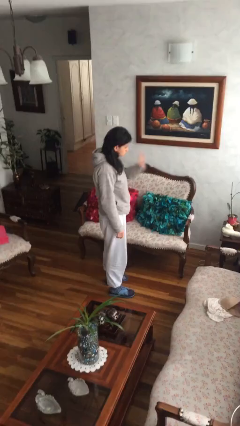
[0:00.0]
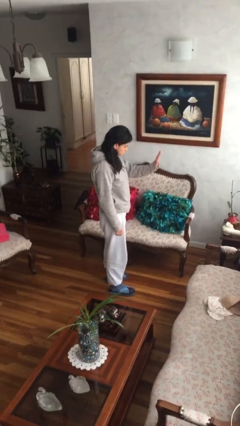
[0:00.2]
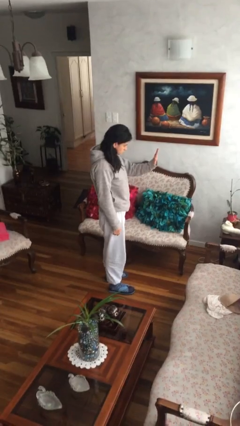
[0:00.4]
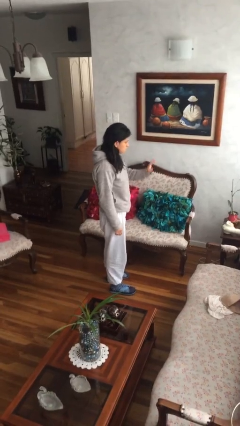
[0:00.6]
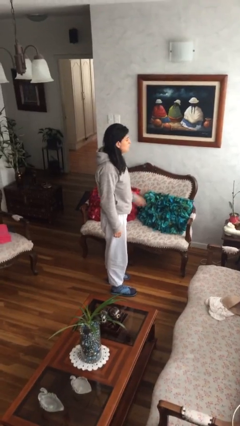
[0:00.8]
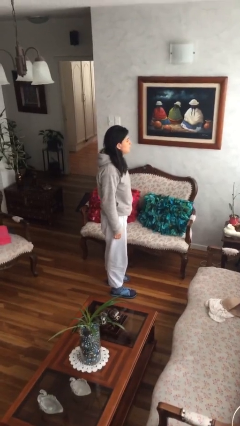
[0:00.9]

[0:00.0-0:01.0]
person gestures stop

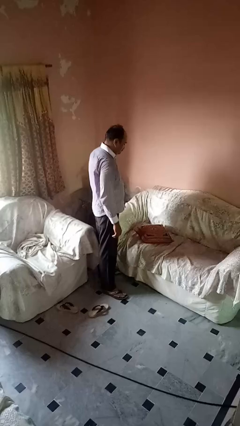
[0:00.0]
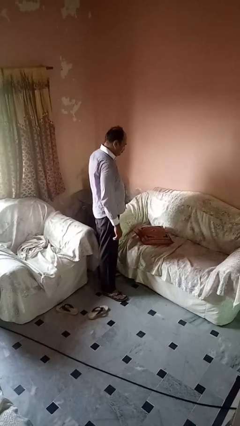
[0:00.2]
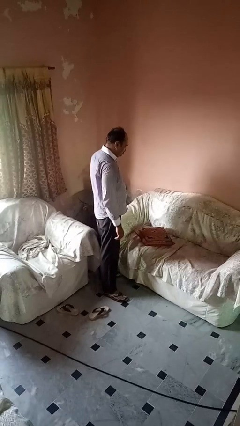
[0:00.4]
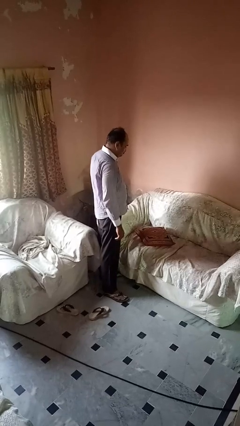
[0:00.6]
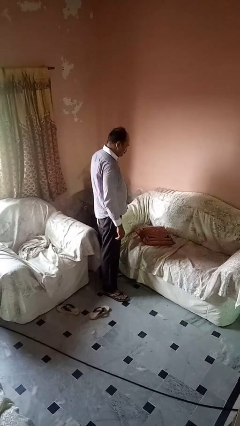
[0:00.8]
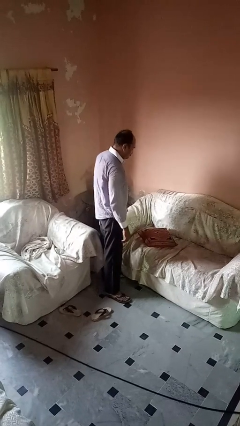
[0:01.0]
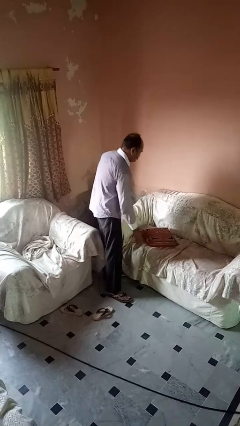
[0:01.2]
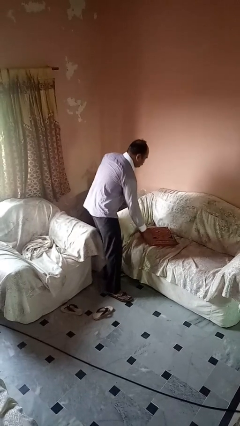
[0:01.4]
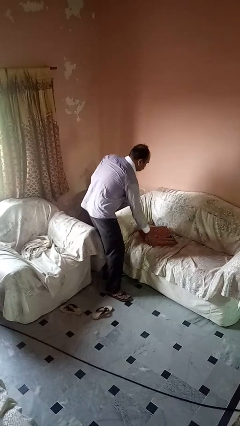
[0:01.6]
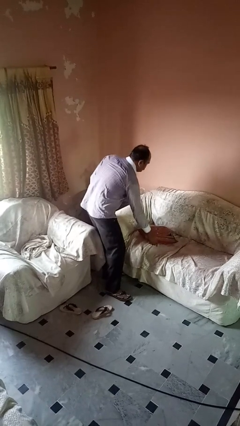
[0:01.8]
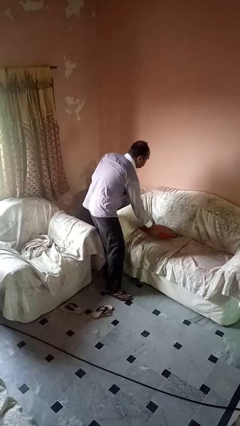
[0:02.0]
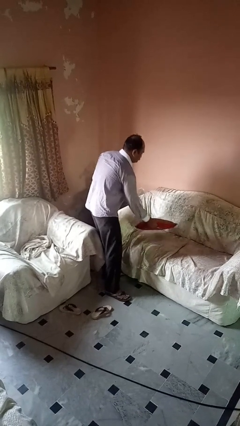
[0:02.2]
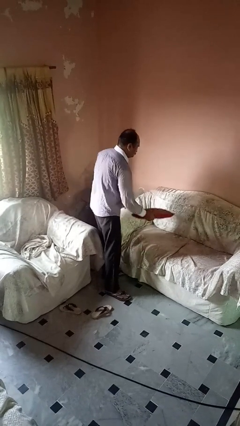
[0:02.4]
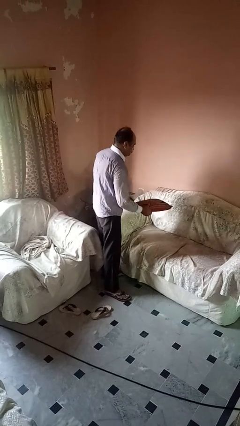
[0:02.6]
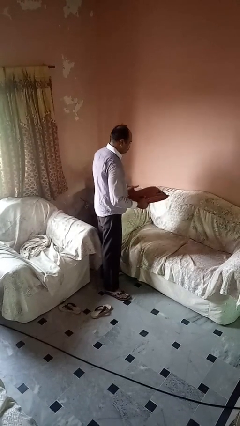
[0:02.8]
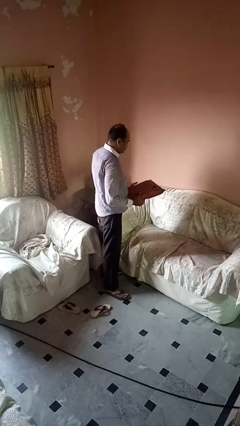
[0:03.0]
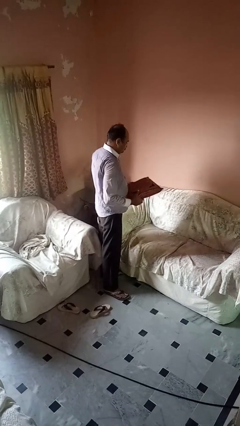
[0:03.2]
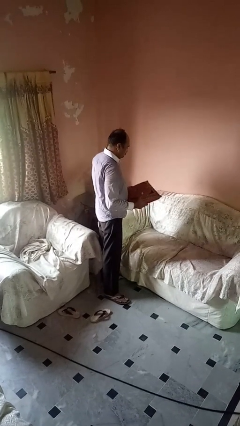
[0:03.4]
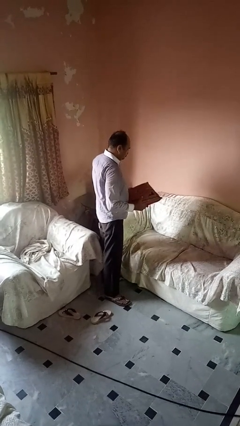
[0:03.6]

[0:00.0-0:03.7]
person picks up object from couch

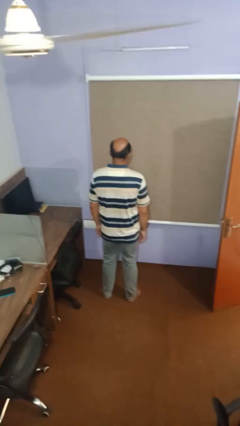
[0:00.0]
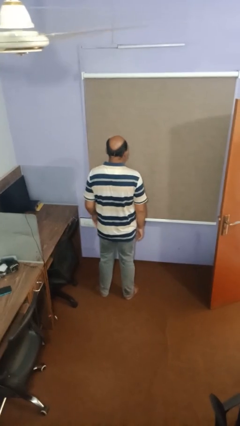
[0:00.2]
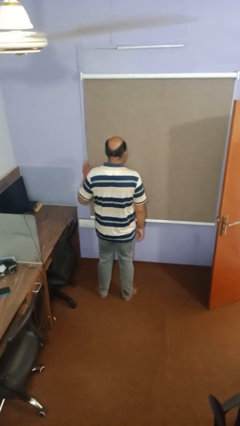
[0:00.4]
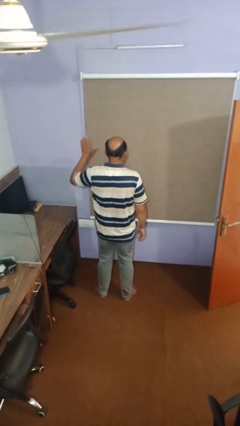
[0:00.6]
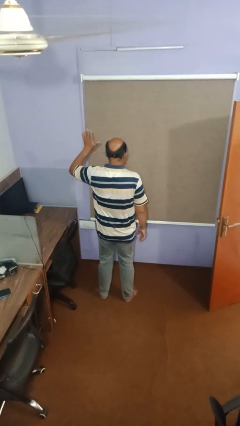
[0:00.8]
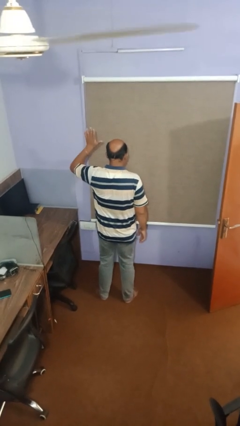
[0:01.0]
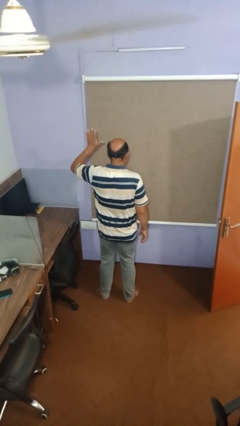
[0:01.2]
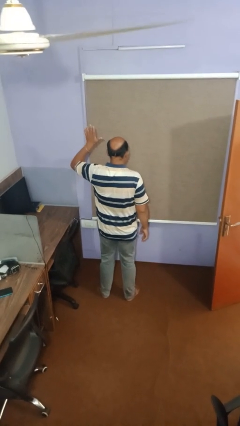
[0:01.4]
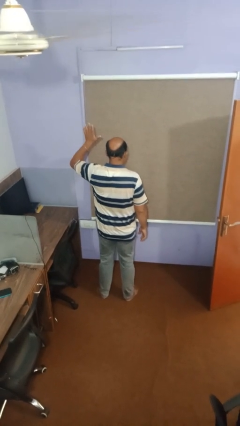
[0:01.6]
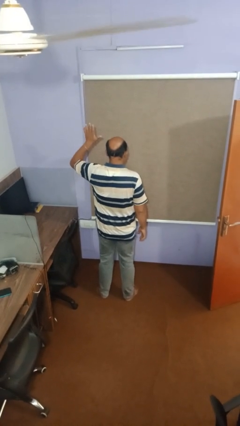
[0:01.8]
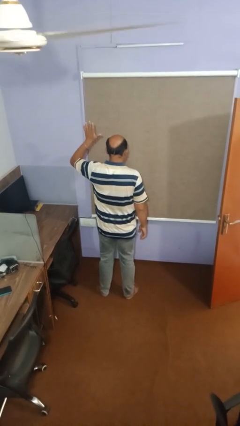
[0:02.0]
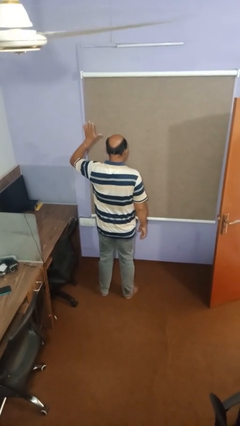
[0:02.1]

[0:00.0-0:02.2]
person gestures raise hand

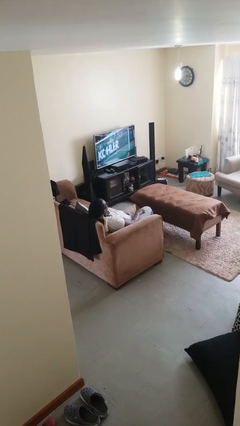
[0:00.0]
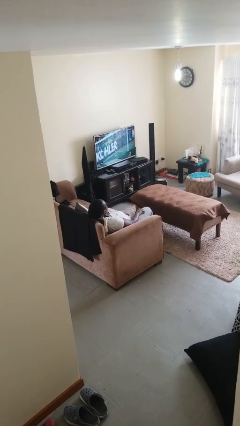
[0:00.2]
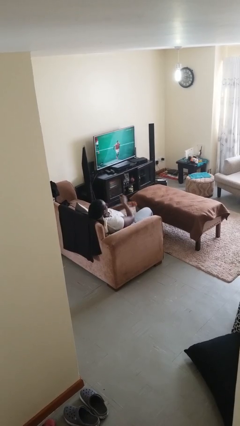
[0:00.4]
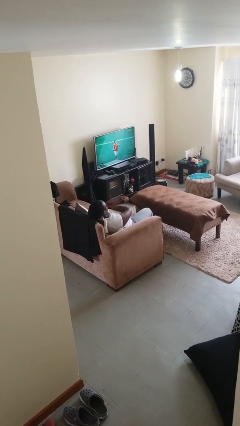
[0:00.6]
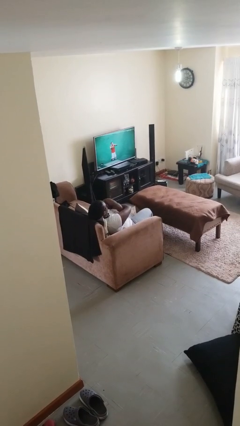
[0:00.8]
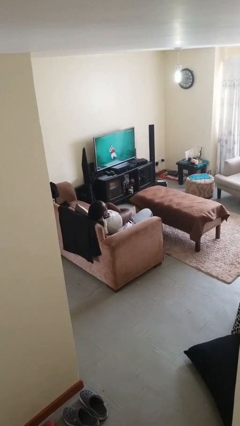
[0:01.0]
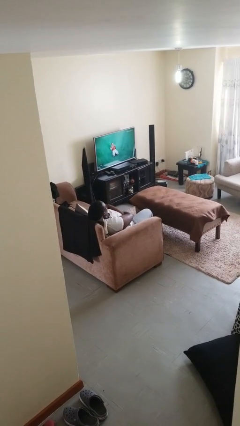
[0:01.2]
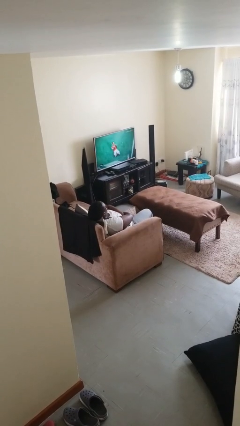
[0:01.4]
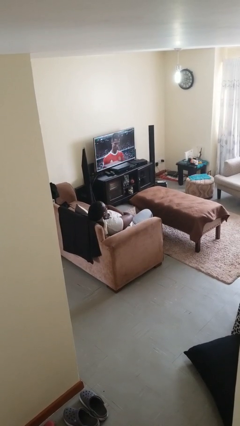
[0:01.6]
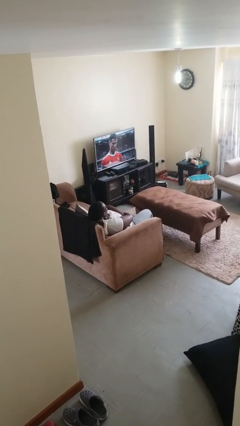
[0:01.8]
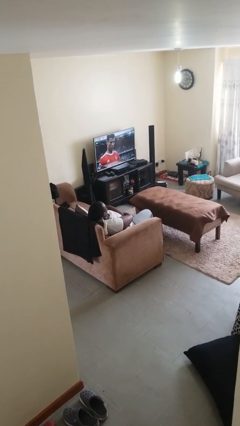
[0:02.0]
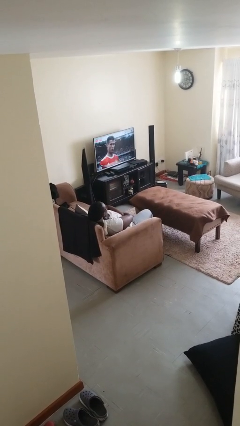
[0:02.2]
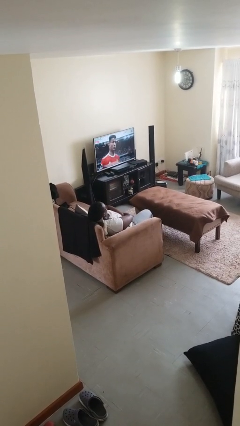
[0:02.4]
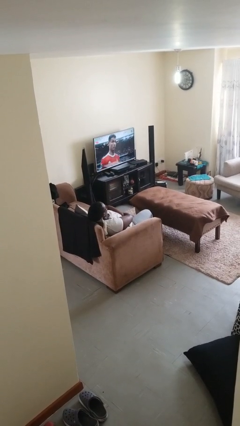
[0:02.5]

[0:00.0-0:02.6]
person crosses arms

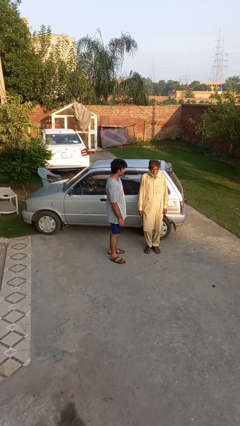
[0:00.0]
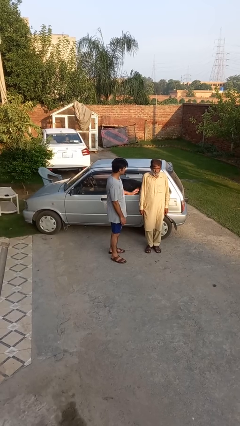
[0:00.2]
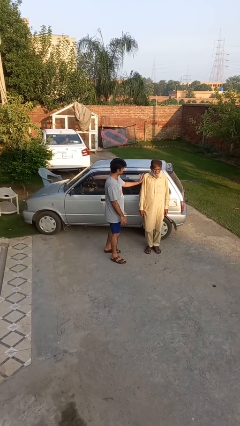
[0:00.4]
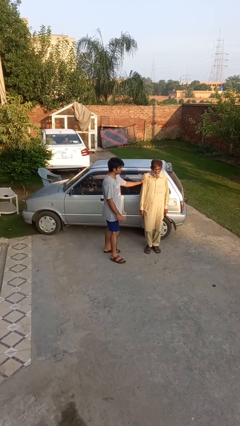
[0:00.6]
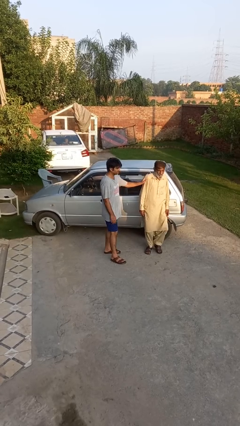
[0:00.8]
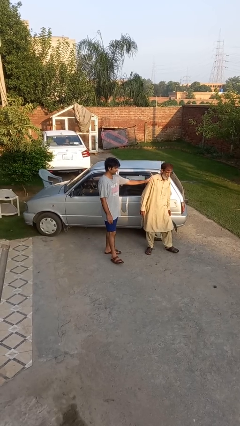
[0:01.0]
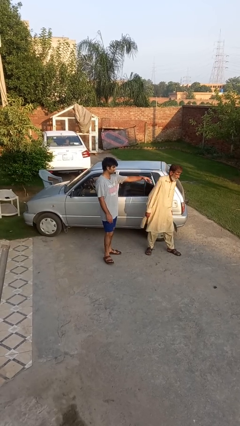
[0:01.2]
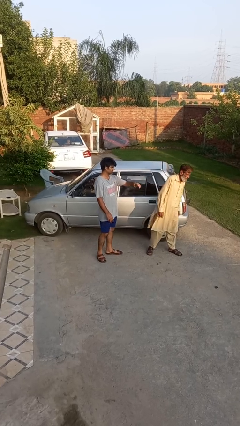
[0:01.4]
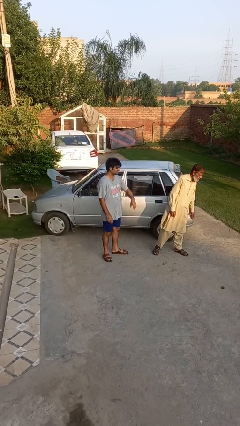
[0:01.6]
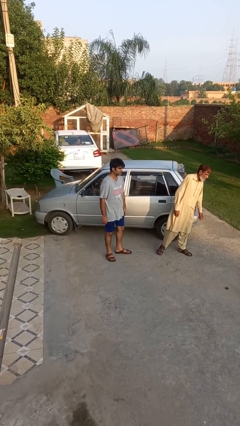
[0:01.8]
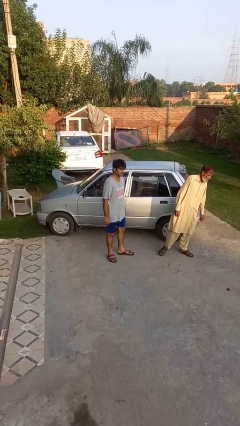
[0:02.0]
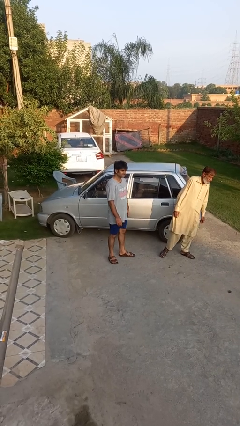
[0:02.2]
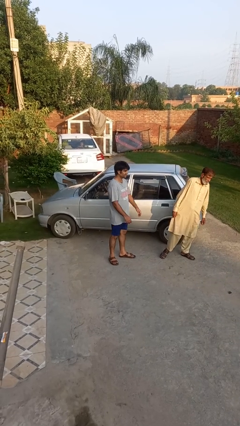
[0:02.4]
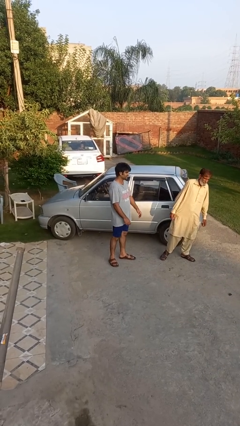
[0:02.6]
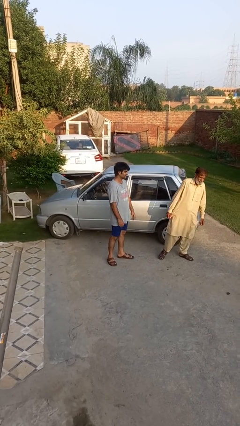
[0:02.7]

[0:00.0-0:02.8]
person shoves person

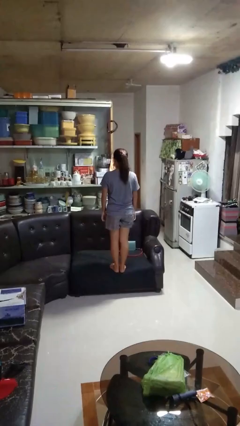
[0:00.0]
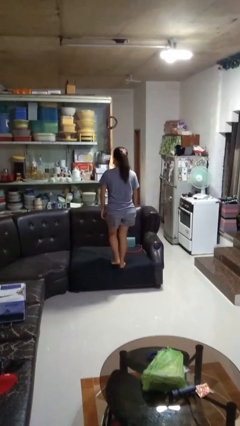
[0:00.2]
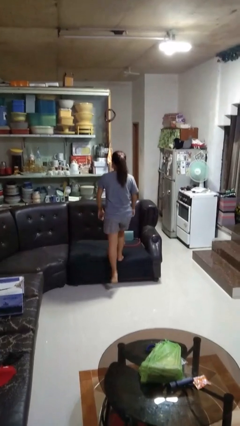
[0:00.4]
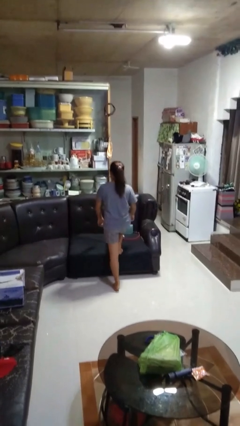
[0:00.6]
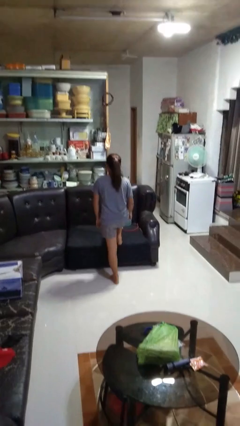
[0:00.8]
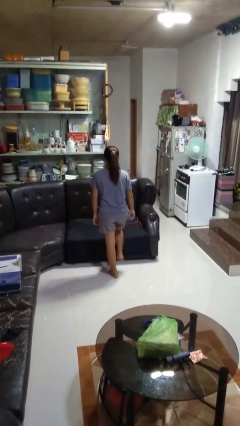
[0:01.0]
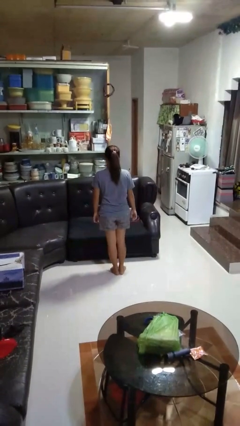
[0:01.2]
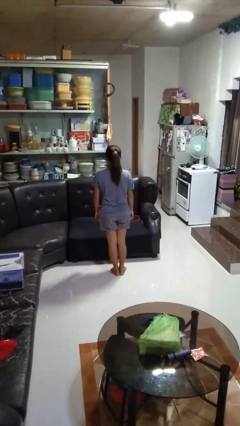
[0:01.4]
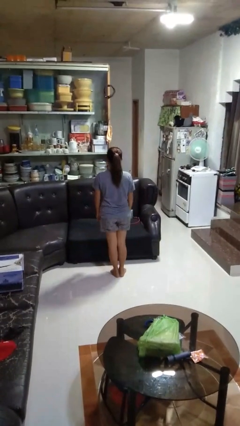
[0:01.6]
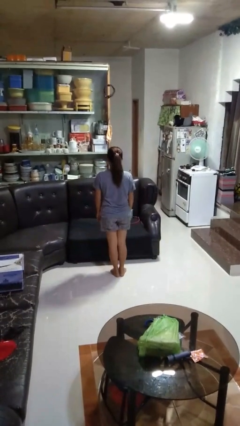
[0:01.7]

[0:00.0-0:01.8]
person climbs off couch

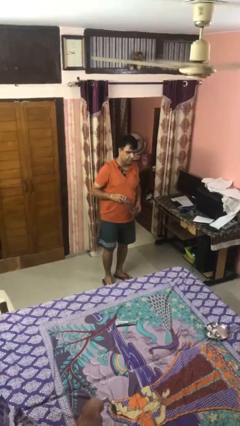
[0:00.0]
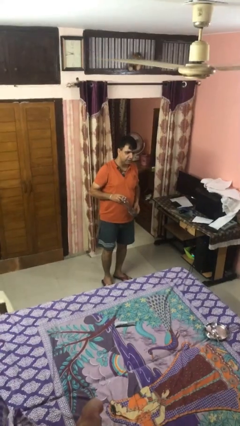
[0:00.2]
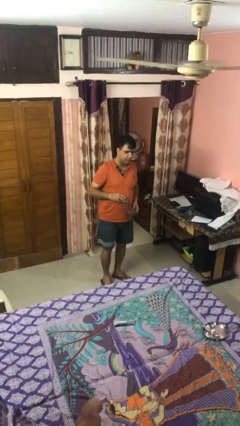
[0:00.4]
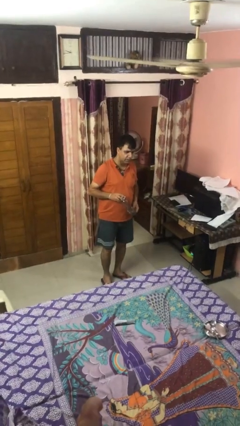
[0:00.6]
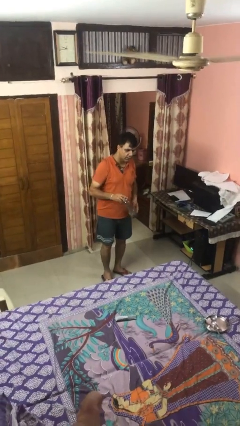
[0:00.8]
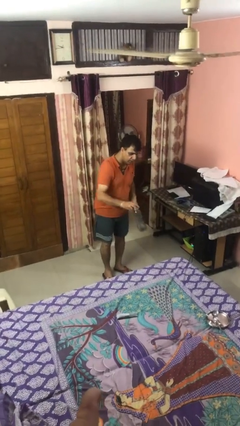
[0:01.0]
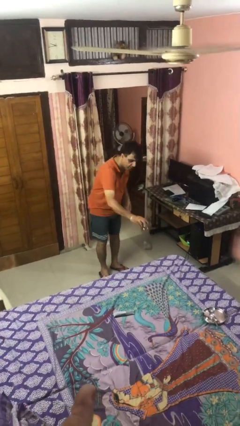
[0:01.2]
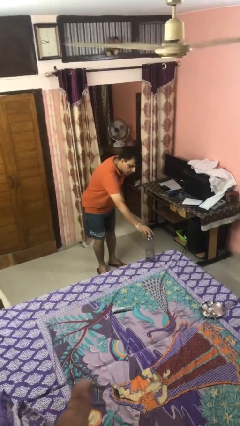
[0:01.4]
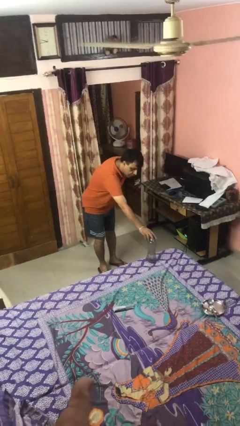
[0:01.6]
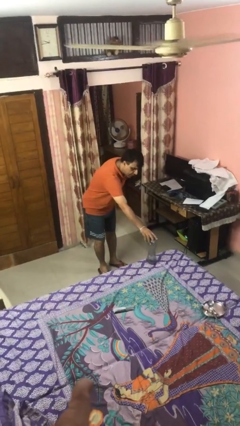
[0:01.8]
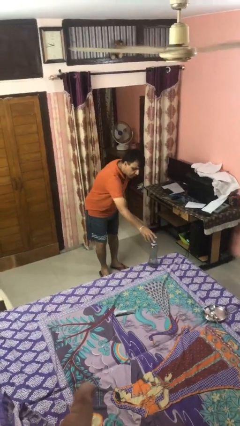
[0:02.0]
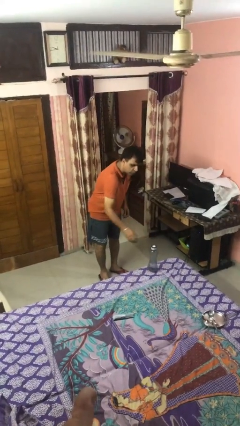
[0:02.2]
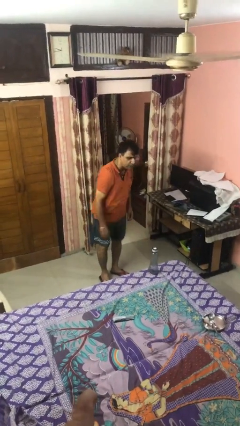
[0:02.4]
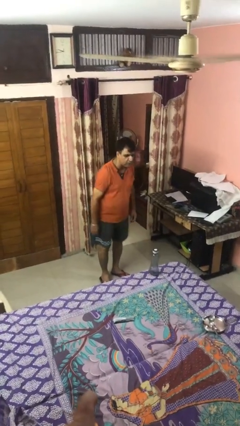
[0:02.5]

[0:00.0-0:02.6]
person puts down object on bed

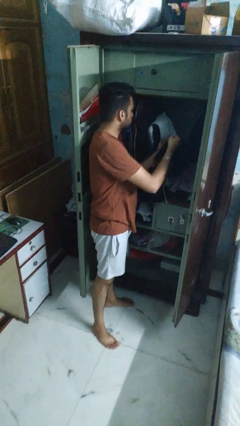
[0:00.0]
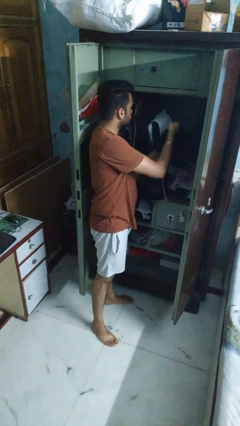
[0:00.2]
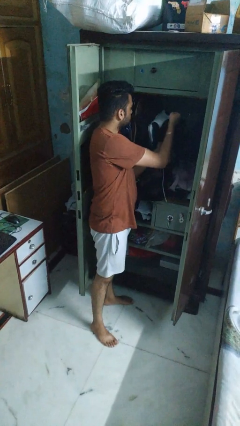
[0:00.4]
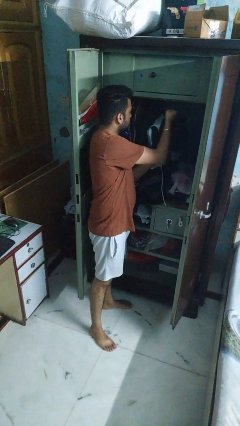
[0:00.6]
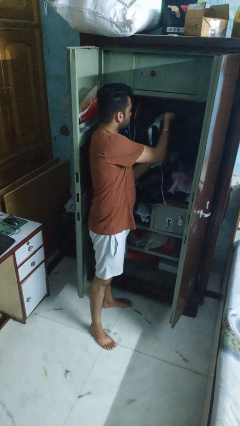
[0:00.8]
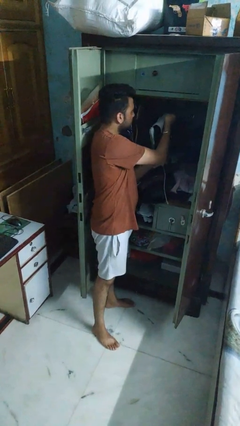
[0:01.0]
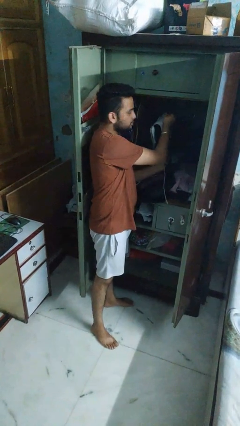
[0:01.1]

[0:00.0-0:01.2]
person puts clothes into closet
